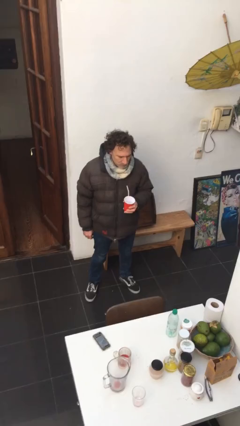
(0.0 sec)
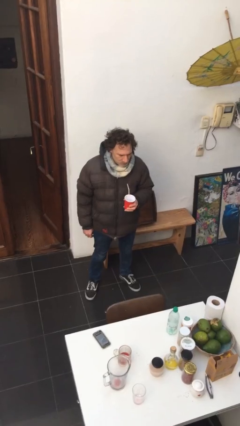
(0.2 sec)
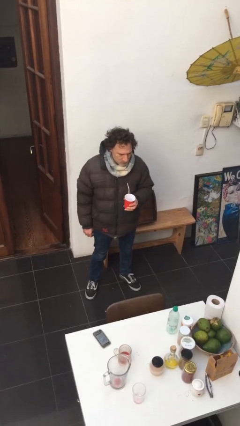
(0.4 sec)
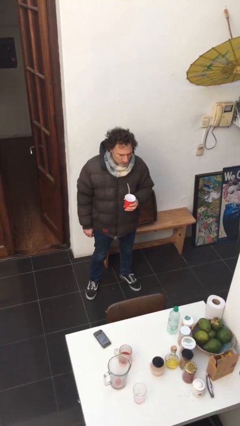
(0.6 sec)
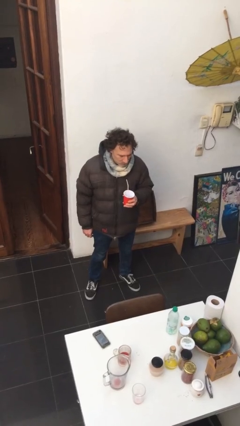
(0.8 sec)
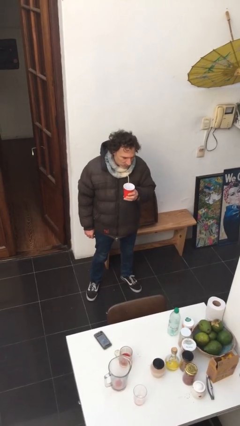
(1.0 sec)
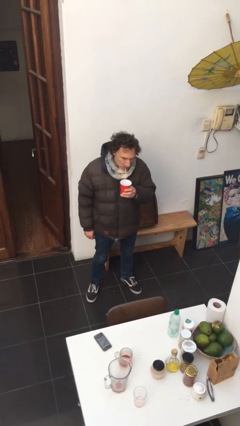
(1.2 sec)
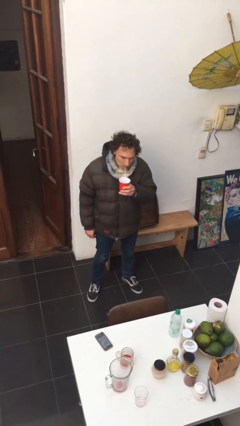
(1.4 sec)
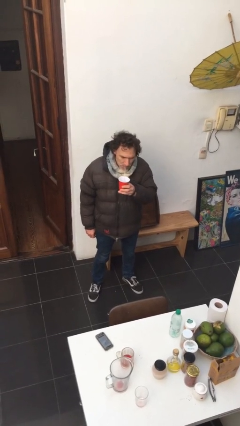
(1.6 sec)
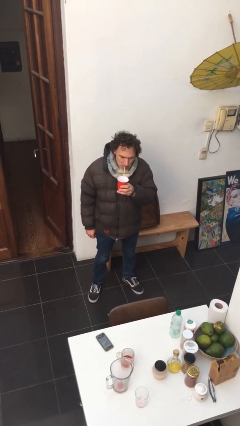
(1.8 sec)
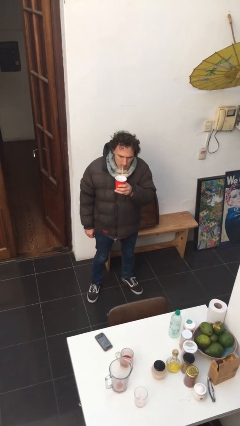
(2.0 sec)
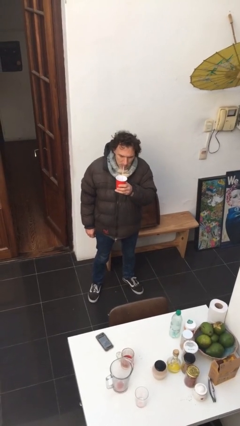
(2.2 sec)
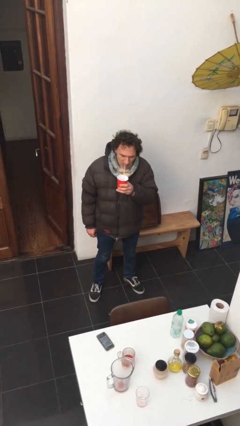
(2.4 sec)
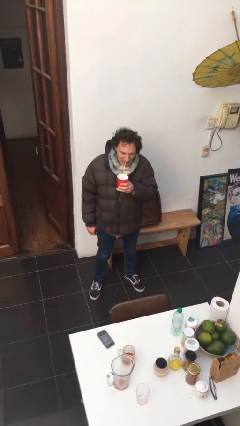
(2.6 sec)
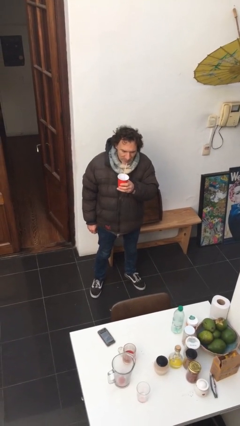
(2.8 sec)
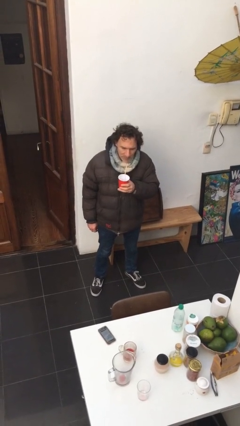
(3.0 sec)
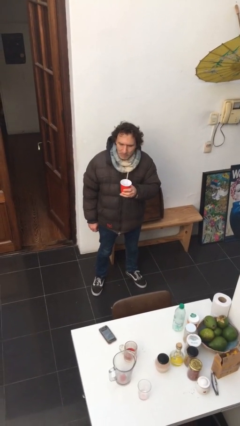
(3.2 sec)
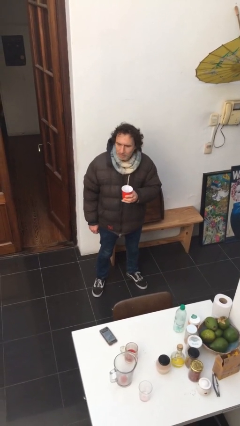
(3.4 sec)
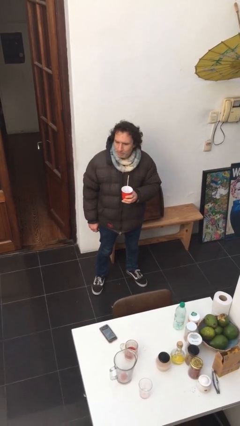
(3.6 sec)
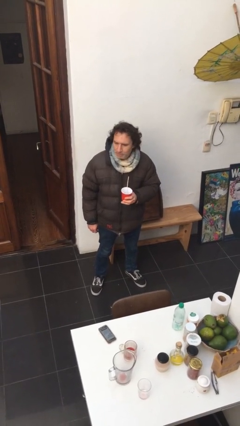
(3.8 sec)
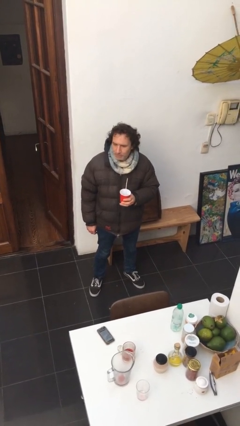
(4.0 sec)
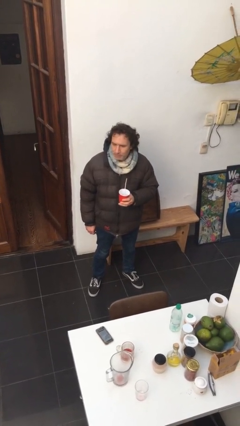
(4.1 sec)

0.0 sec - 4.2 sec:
person drinks from straw

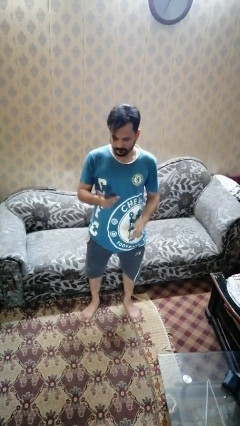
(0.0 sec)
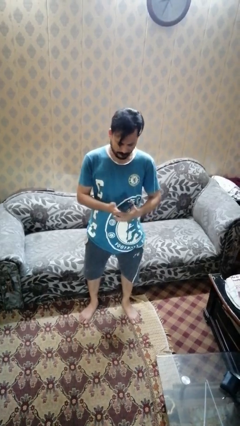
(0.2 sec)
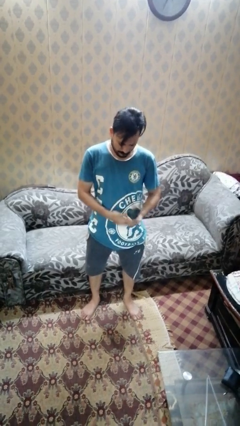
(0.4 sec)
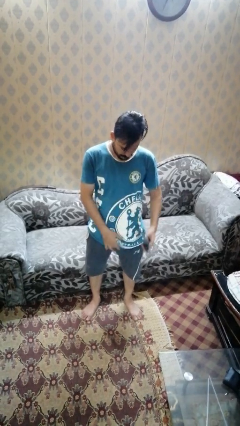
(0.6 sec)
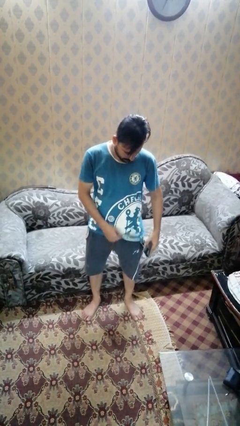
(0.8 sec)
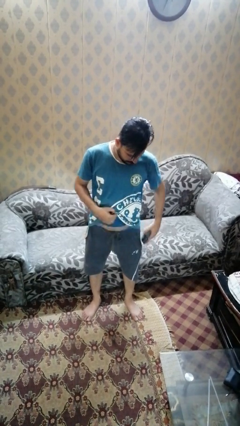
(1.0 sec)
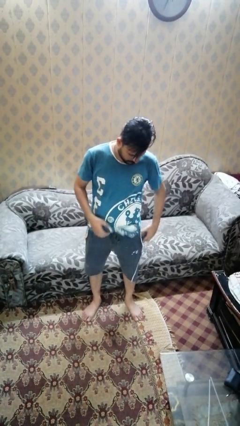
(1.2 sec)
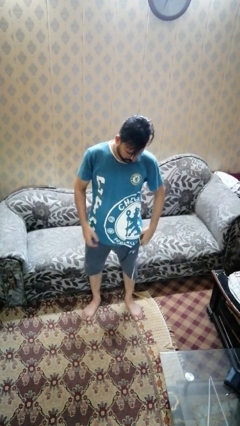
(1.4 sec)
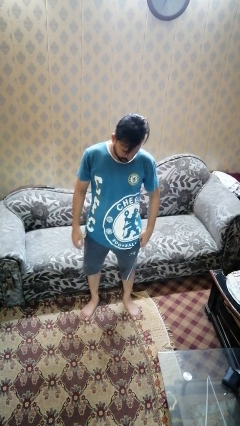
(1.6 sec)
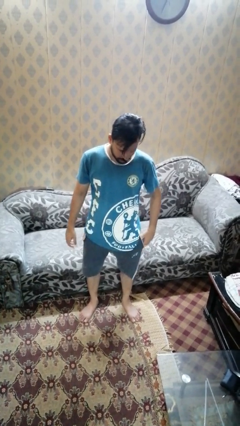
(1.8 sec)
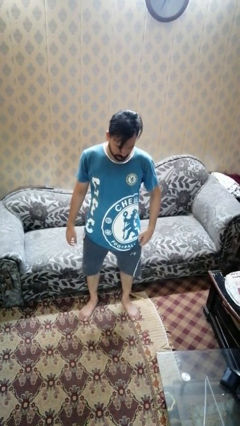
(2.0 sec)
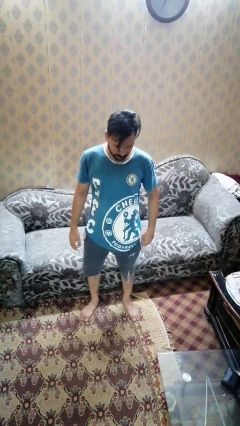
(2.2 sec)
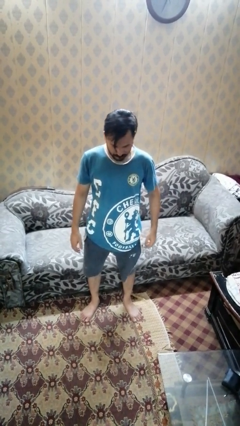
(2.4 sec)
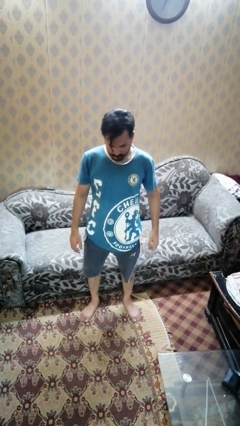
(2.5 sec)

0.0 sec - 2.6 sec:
person puts phone into pocket

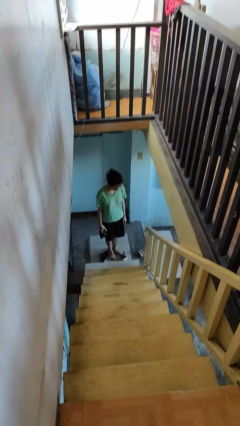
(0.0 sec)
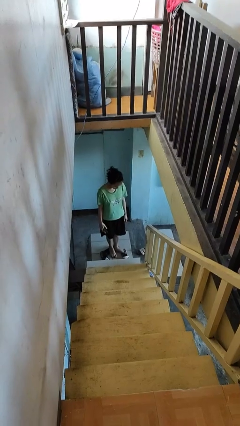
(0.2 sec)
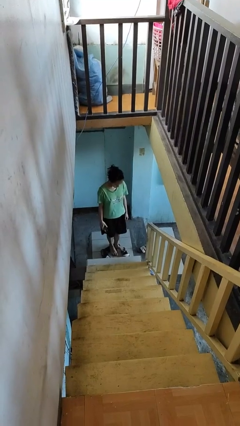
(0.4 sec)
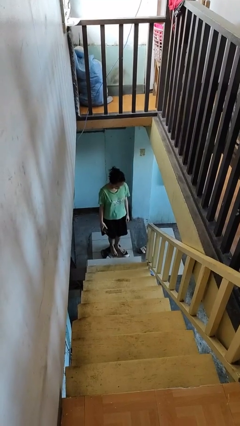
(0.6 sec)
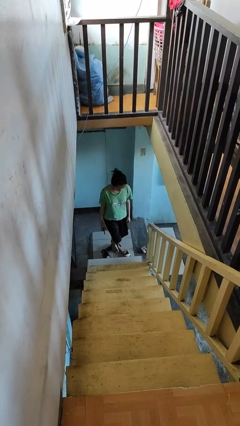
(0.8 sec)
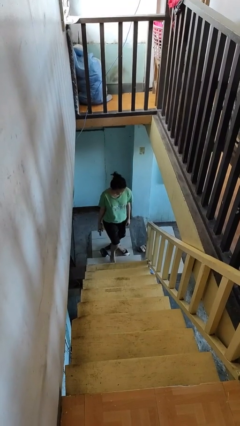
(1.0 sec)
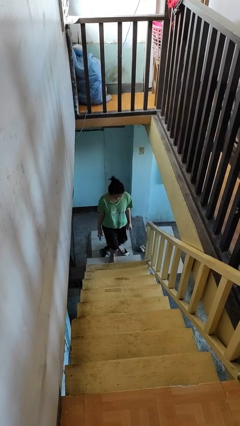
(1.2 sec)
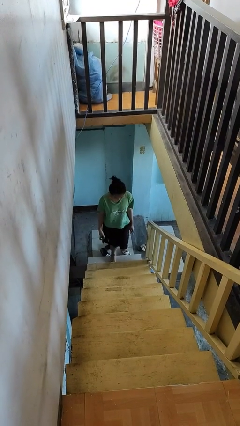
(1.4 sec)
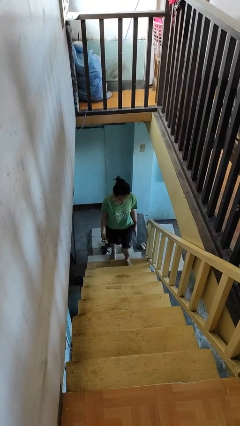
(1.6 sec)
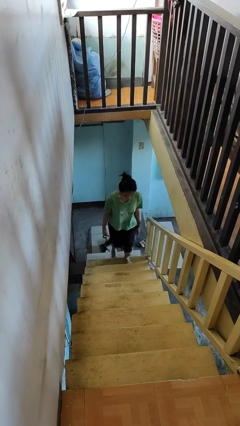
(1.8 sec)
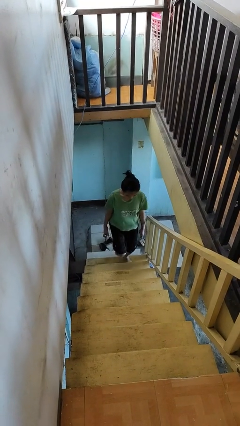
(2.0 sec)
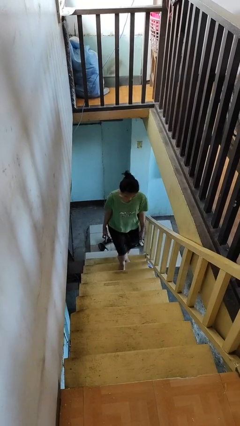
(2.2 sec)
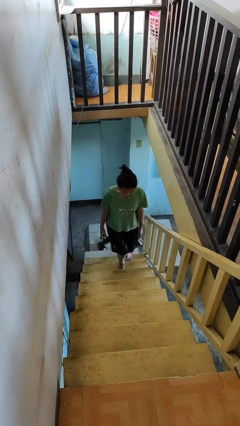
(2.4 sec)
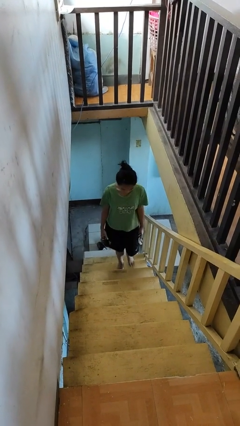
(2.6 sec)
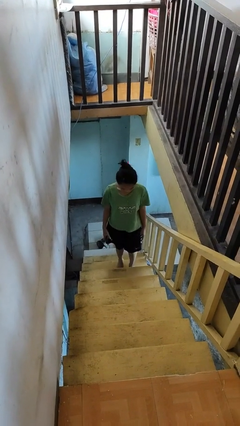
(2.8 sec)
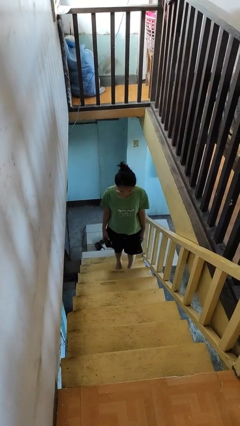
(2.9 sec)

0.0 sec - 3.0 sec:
person climbs up stairs

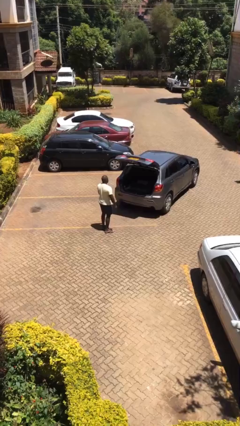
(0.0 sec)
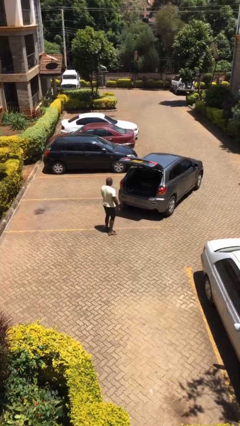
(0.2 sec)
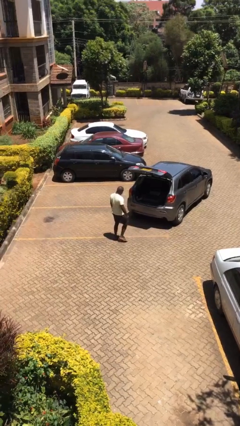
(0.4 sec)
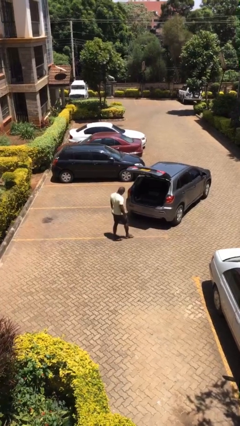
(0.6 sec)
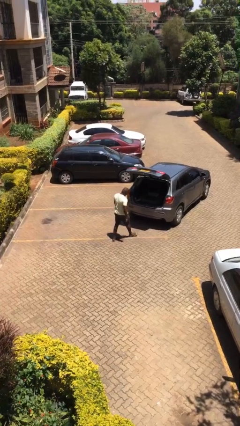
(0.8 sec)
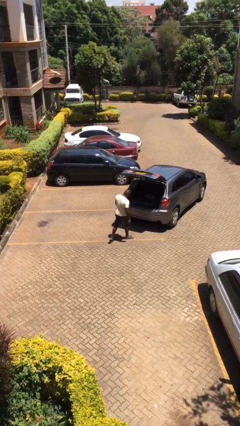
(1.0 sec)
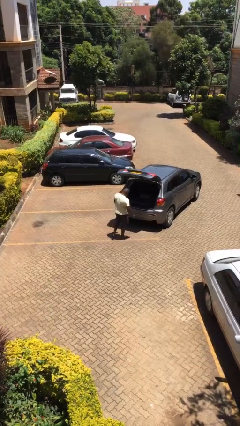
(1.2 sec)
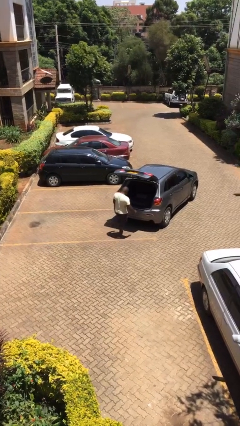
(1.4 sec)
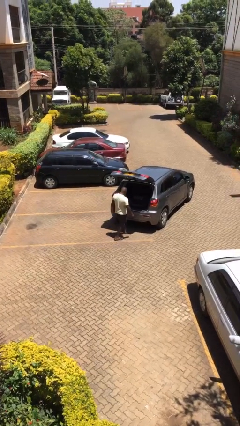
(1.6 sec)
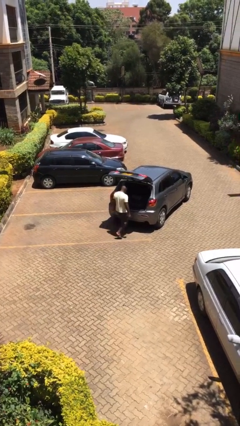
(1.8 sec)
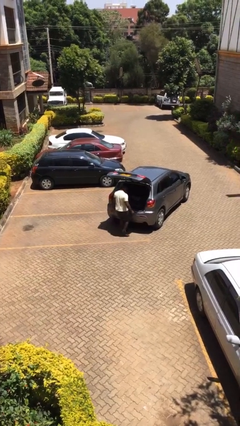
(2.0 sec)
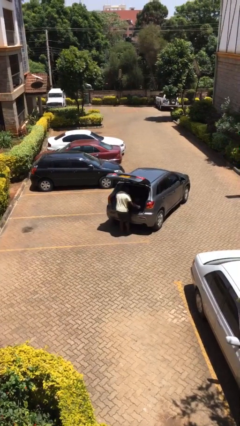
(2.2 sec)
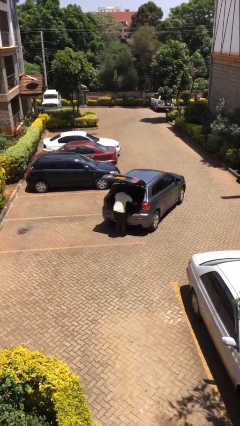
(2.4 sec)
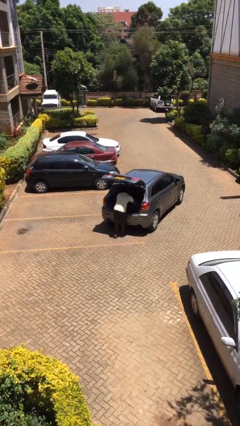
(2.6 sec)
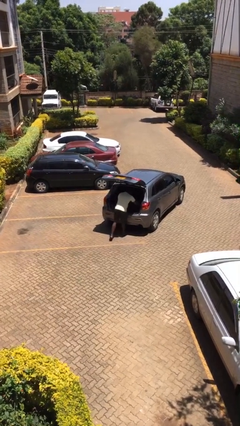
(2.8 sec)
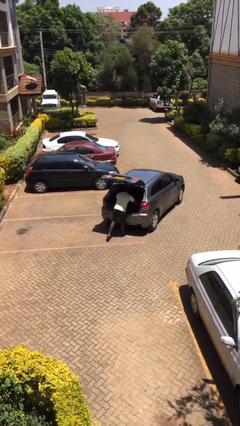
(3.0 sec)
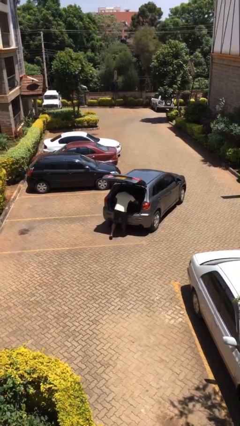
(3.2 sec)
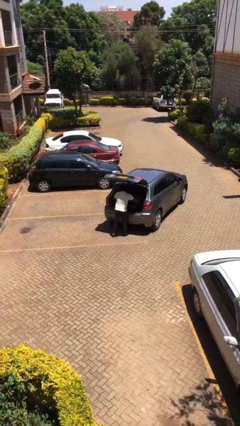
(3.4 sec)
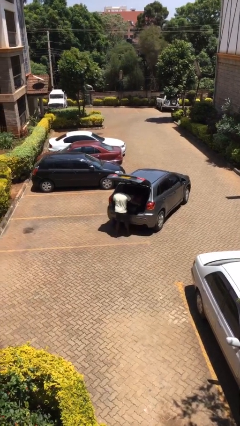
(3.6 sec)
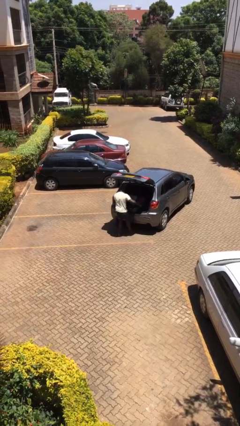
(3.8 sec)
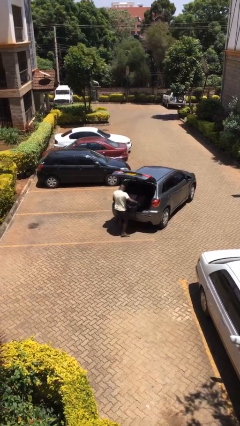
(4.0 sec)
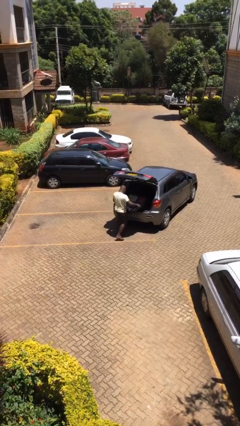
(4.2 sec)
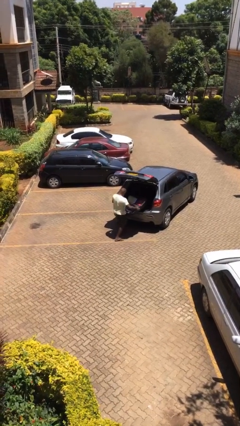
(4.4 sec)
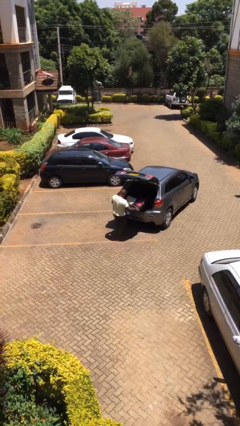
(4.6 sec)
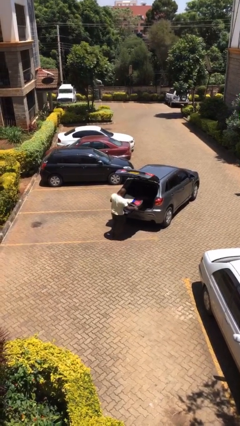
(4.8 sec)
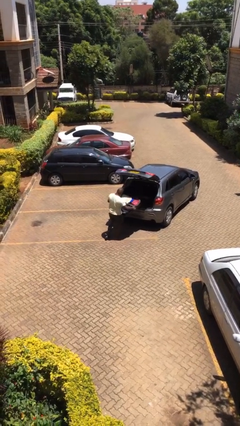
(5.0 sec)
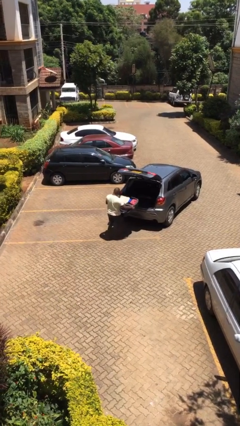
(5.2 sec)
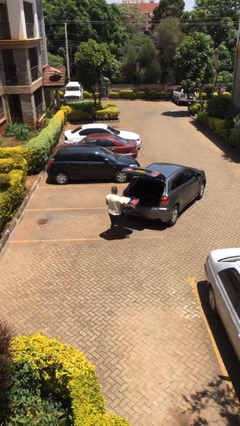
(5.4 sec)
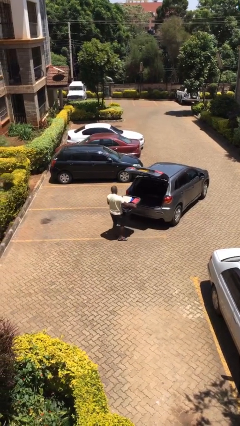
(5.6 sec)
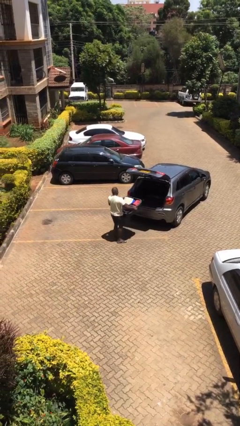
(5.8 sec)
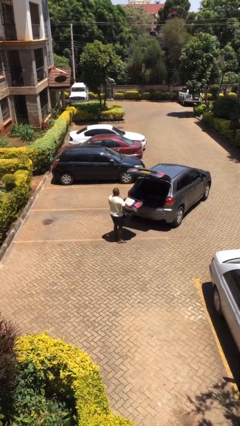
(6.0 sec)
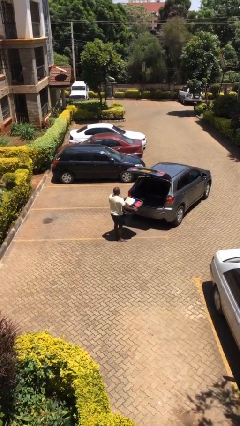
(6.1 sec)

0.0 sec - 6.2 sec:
person unloads car

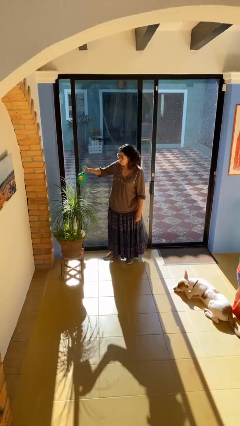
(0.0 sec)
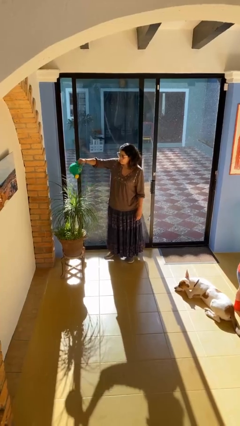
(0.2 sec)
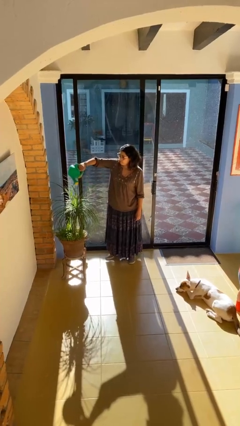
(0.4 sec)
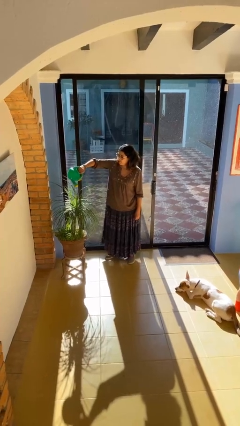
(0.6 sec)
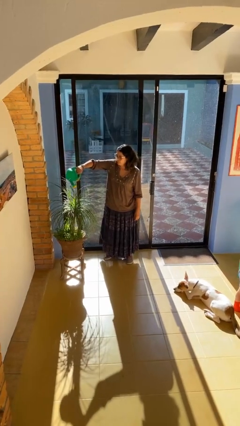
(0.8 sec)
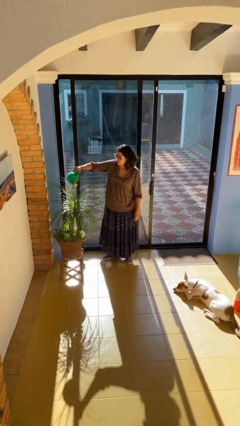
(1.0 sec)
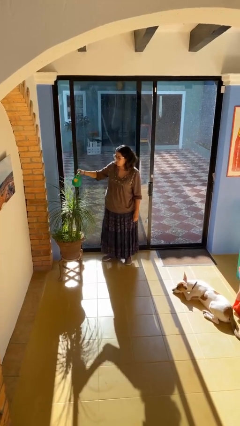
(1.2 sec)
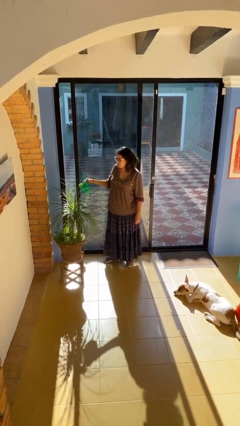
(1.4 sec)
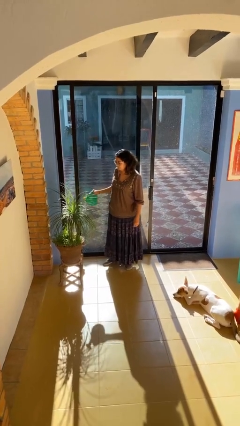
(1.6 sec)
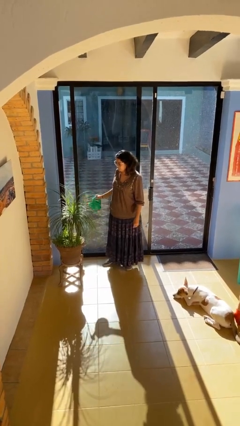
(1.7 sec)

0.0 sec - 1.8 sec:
person waters houseplant

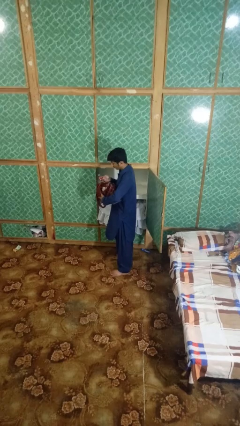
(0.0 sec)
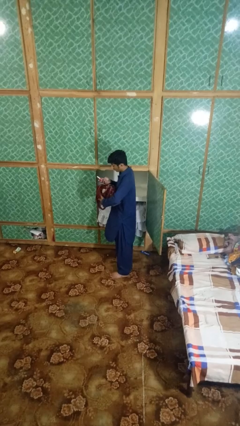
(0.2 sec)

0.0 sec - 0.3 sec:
person puts object into purse
